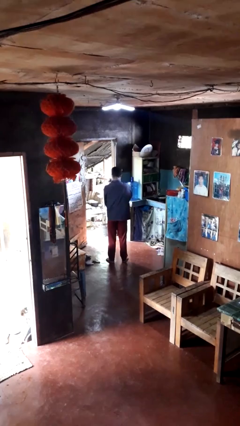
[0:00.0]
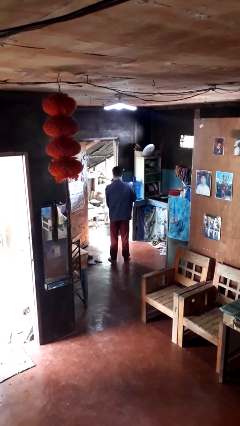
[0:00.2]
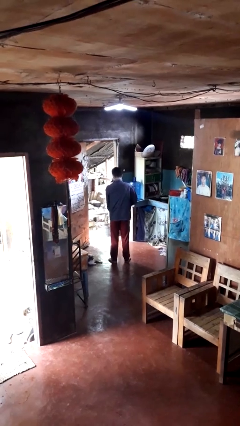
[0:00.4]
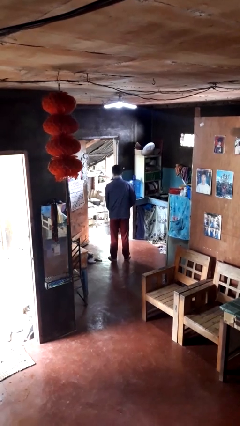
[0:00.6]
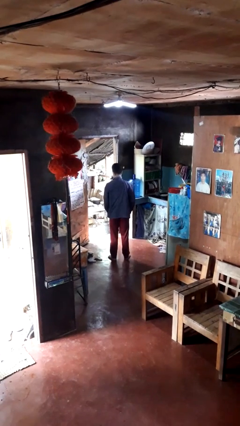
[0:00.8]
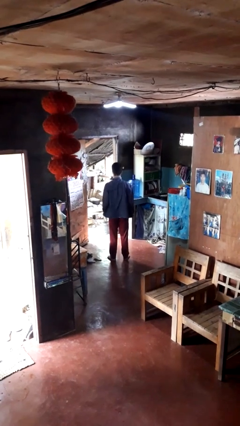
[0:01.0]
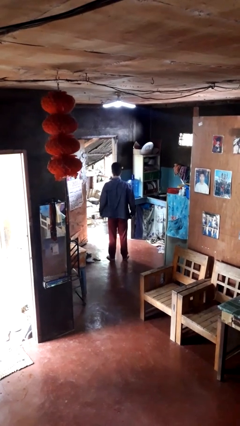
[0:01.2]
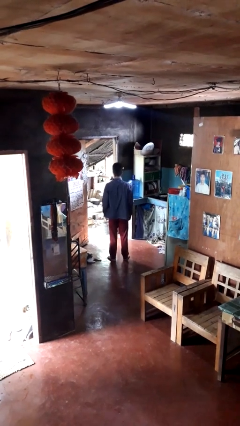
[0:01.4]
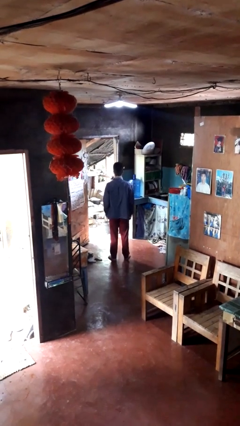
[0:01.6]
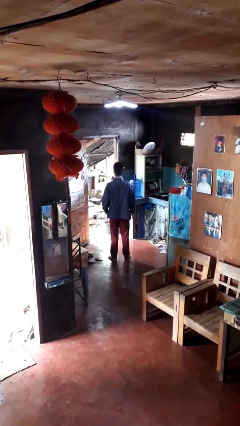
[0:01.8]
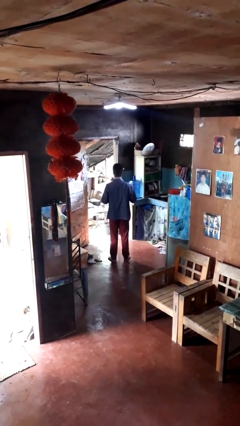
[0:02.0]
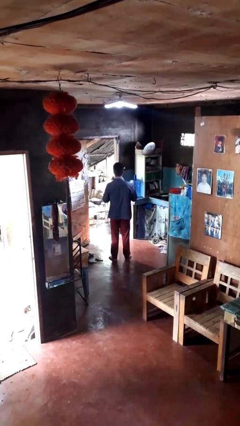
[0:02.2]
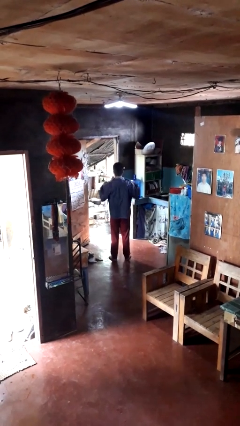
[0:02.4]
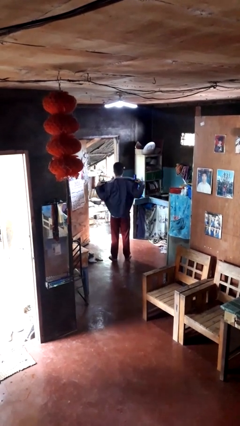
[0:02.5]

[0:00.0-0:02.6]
person unzips jacket

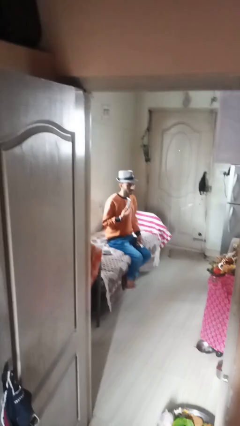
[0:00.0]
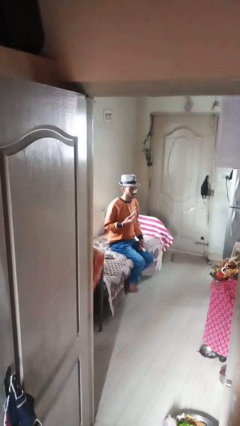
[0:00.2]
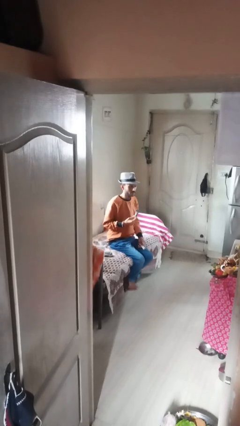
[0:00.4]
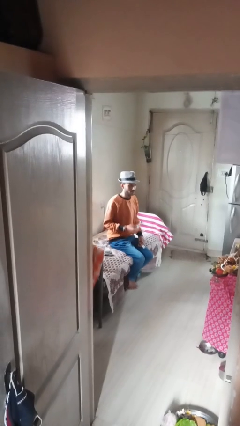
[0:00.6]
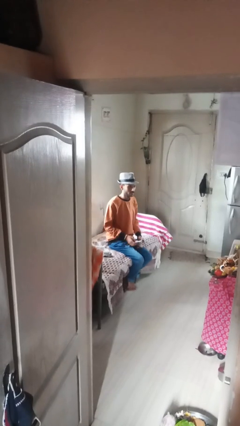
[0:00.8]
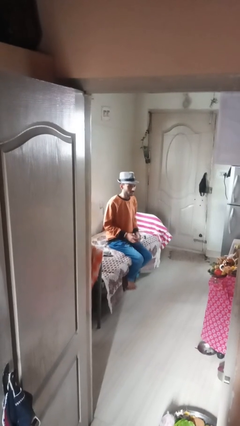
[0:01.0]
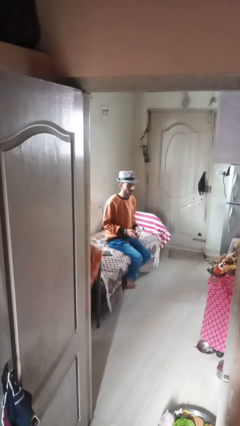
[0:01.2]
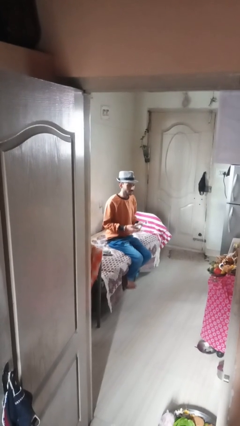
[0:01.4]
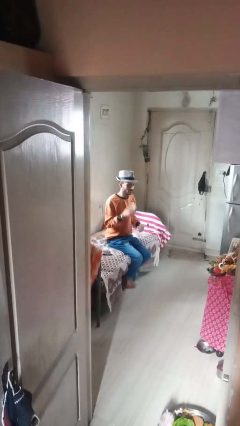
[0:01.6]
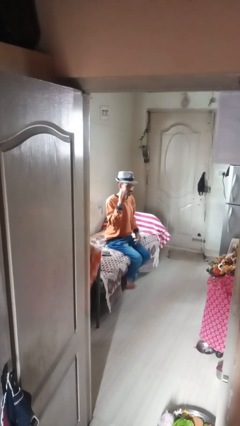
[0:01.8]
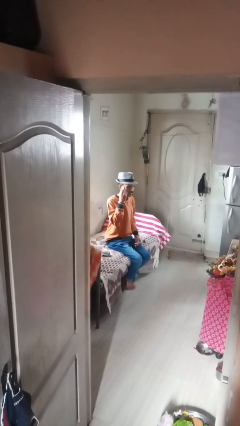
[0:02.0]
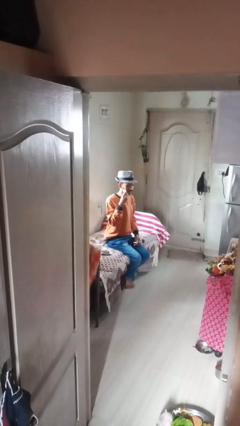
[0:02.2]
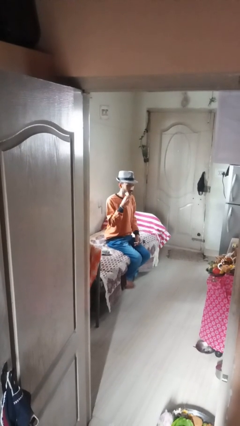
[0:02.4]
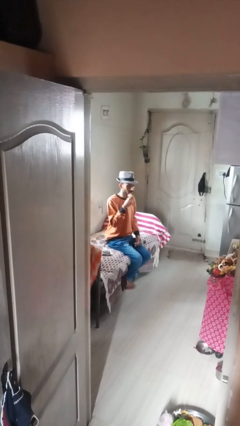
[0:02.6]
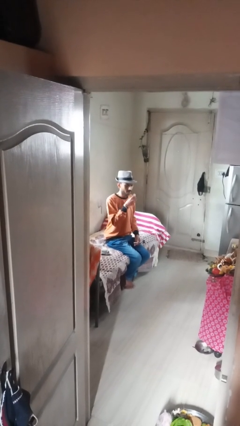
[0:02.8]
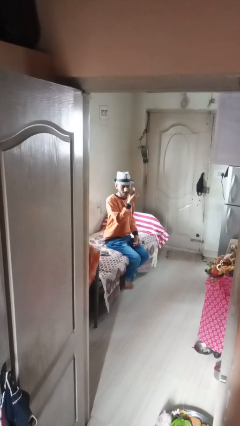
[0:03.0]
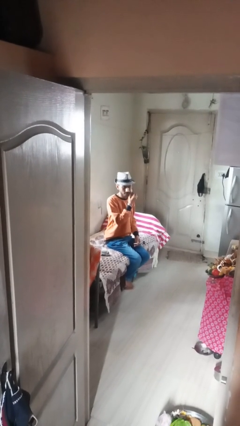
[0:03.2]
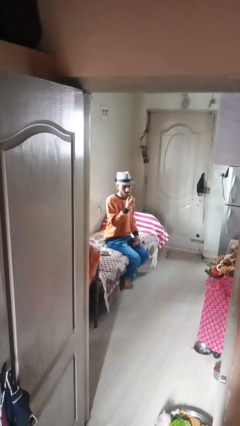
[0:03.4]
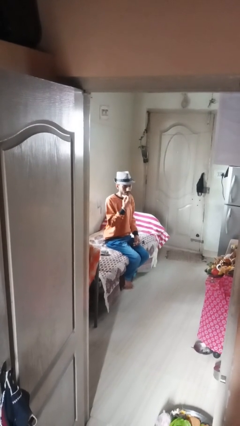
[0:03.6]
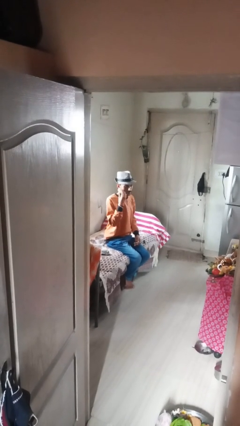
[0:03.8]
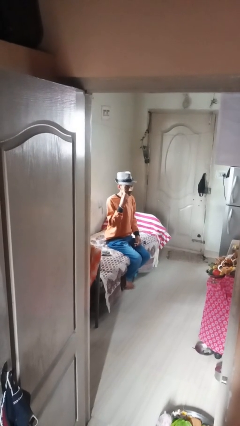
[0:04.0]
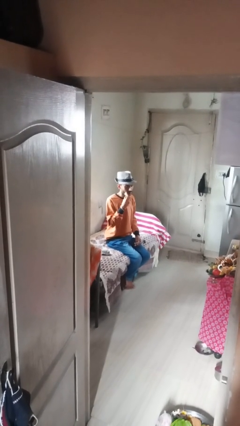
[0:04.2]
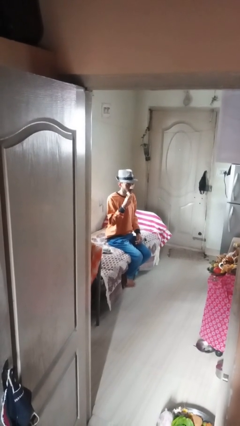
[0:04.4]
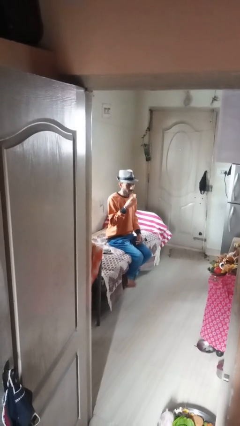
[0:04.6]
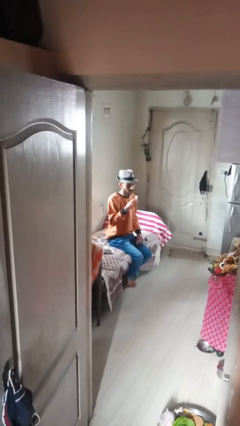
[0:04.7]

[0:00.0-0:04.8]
person applies shaving cream

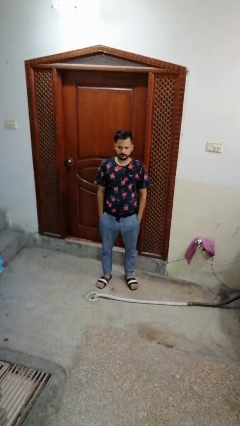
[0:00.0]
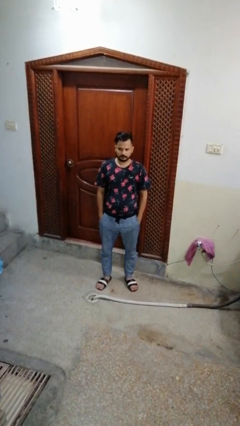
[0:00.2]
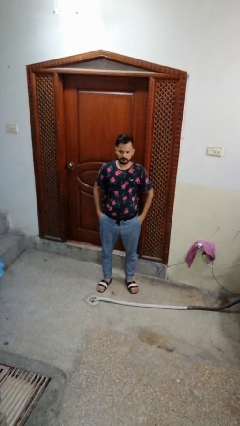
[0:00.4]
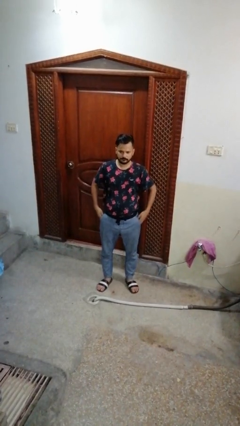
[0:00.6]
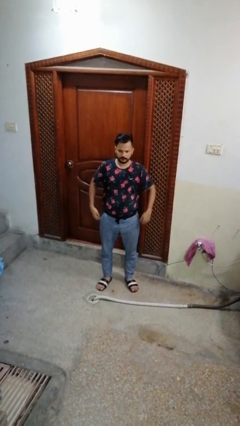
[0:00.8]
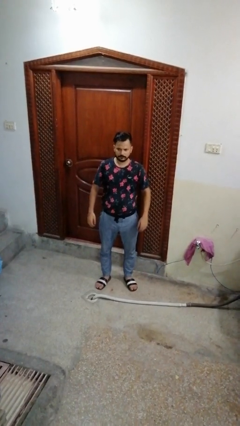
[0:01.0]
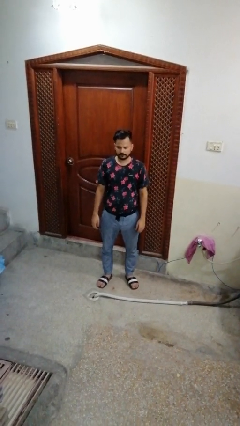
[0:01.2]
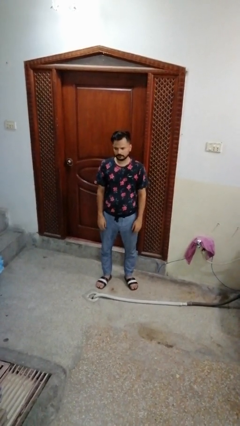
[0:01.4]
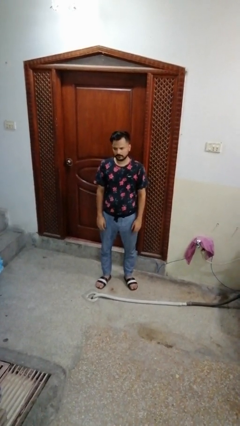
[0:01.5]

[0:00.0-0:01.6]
person puts hands in back pockets

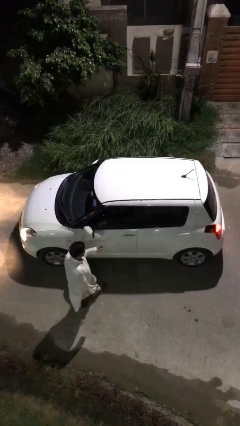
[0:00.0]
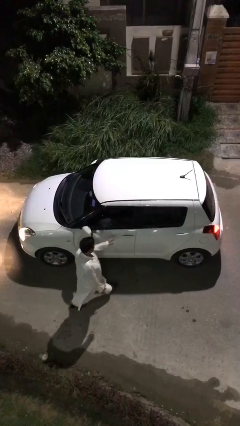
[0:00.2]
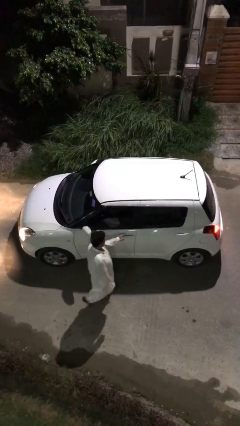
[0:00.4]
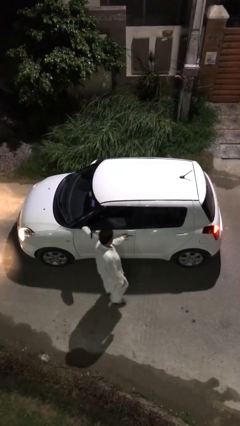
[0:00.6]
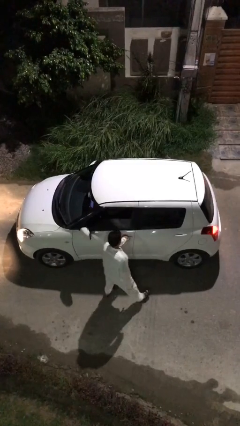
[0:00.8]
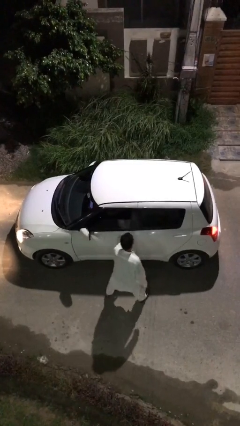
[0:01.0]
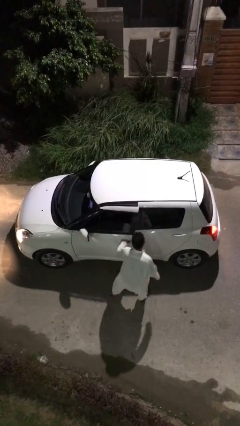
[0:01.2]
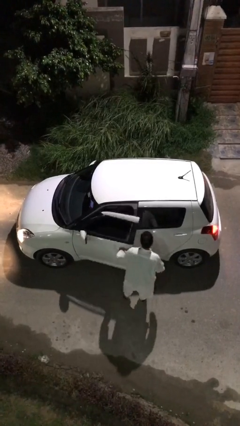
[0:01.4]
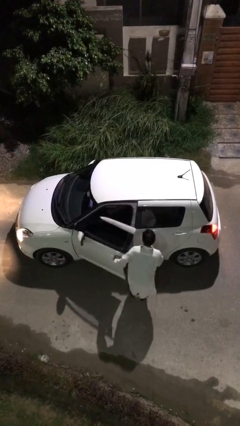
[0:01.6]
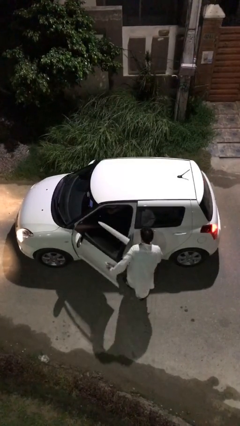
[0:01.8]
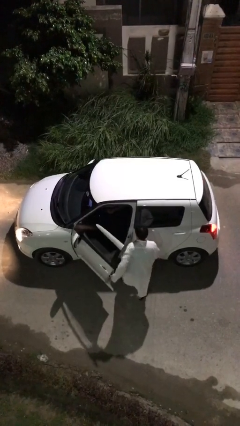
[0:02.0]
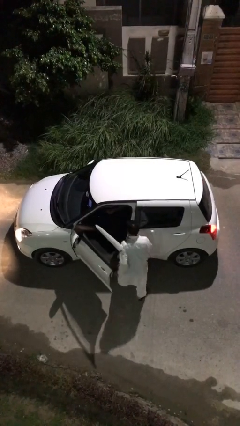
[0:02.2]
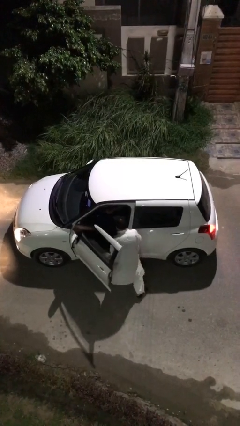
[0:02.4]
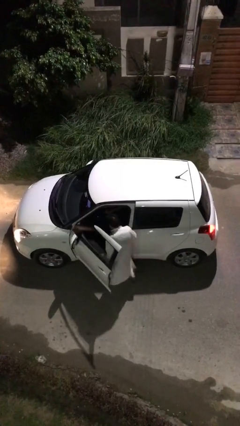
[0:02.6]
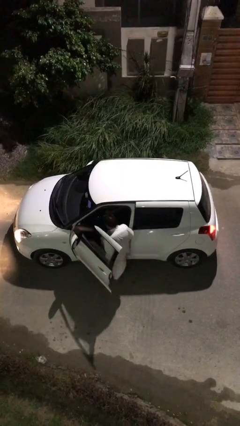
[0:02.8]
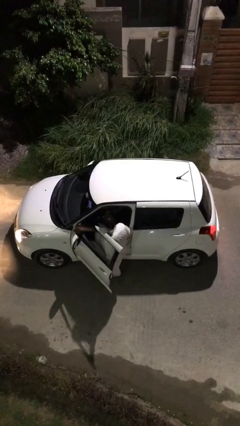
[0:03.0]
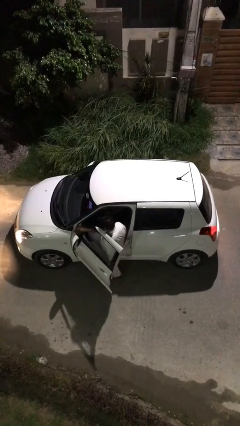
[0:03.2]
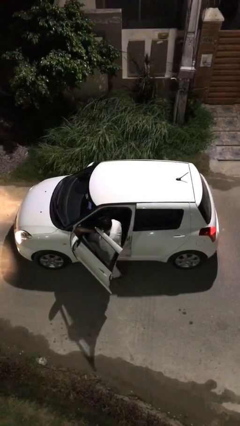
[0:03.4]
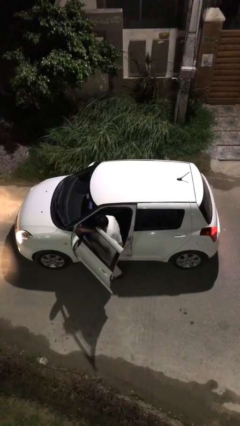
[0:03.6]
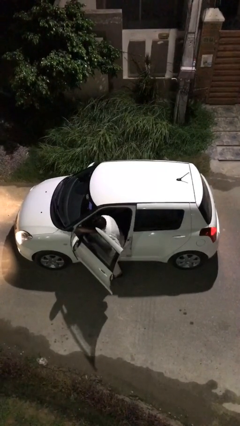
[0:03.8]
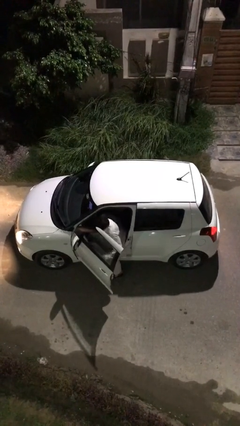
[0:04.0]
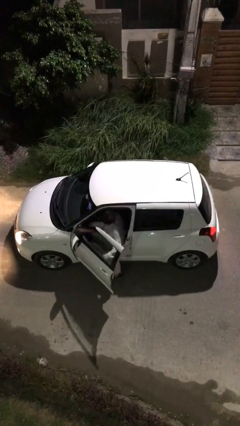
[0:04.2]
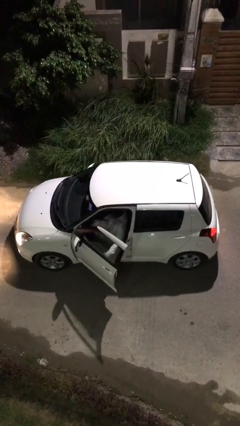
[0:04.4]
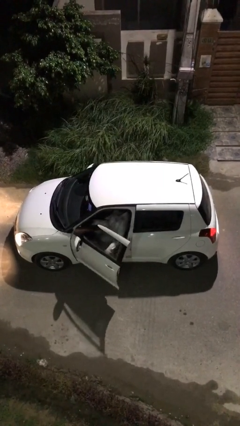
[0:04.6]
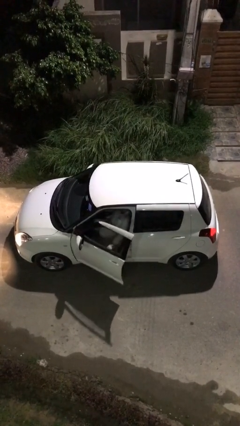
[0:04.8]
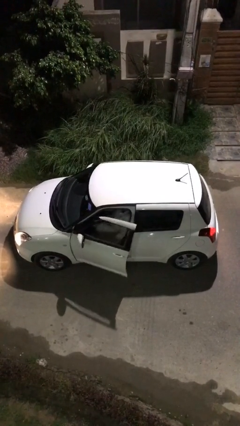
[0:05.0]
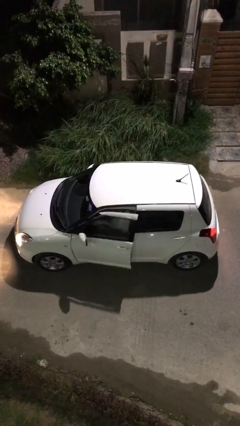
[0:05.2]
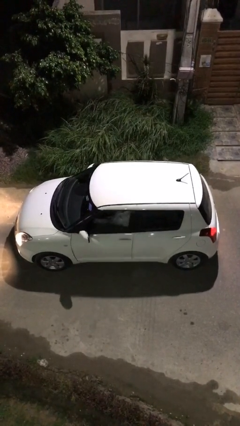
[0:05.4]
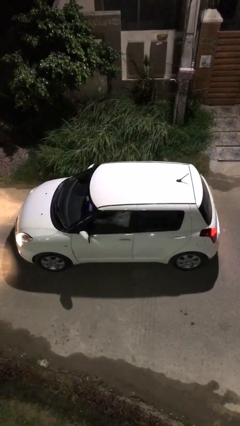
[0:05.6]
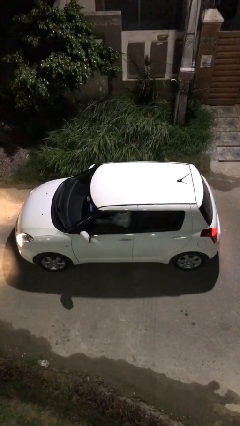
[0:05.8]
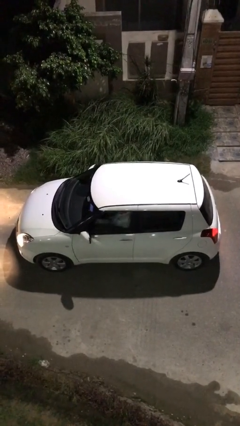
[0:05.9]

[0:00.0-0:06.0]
car picks up person

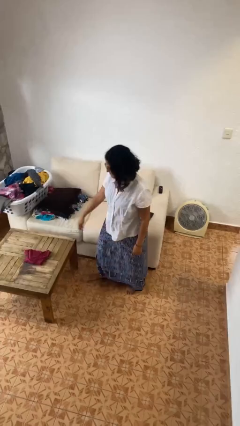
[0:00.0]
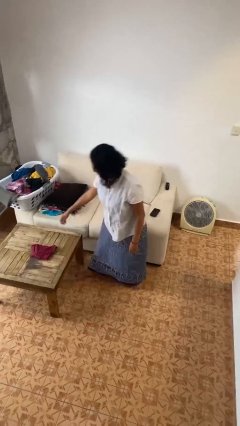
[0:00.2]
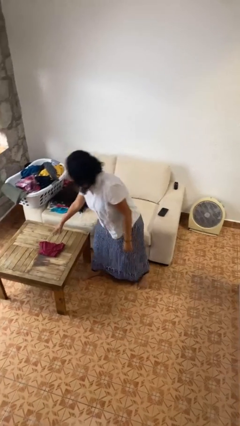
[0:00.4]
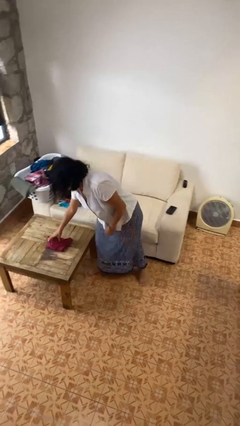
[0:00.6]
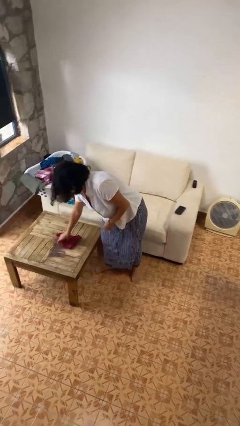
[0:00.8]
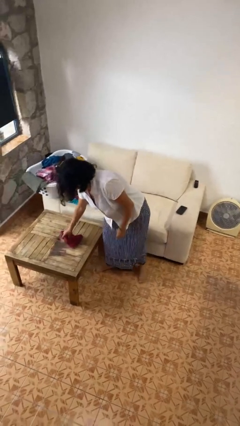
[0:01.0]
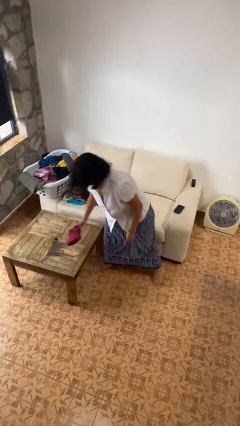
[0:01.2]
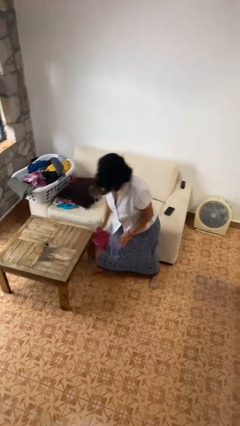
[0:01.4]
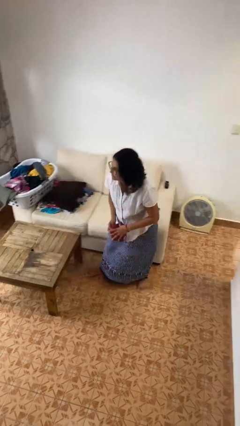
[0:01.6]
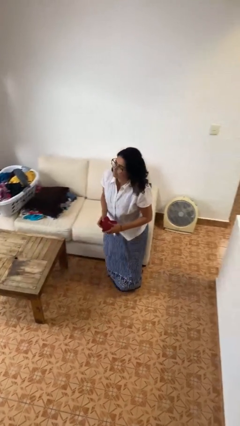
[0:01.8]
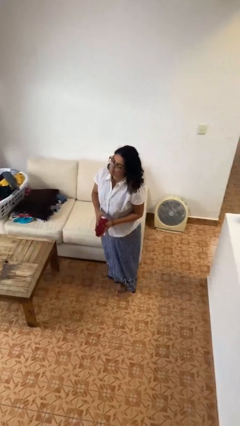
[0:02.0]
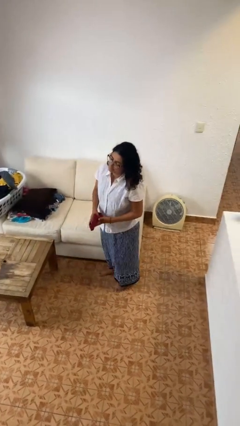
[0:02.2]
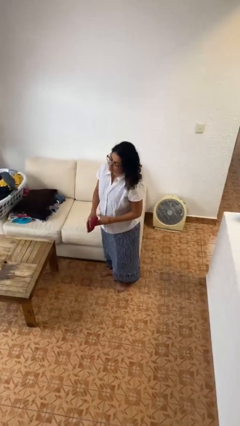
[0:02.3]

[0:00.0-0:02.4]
person picks up object from table

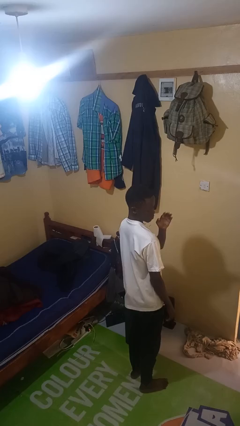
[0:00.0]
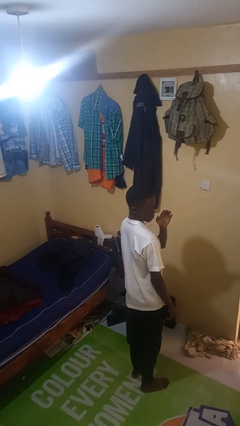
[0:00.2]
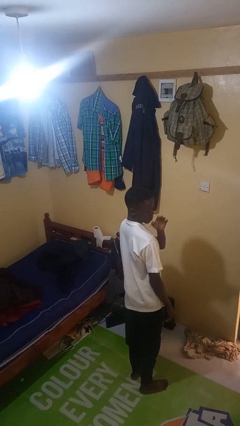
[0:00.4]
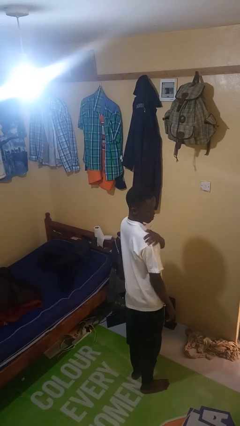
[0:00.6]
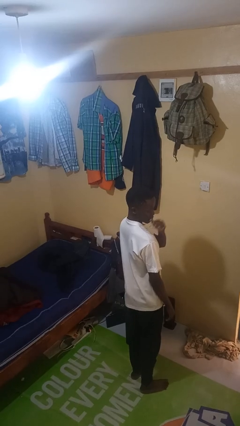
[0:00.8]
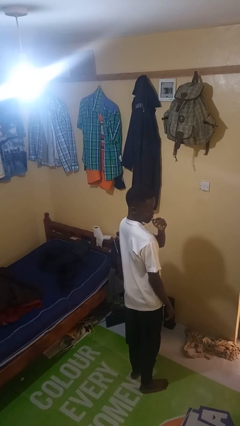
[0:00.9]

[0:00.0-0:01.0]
person swats bug
